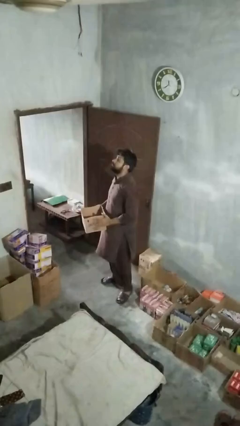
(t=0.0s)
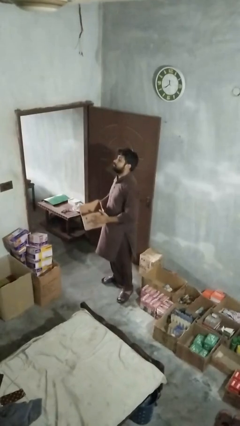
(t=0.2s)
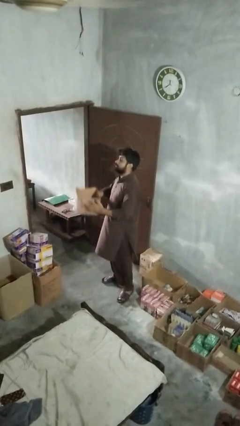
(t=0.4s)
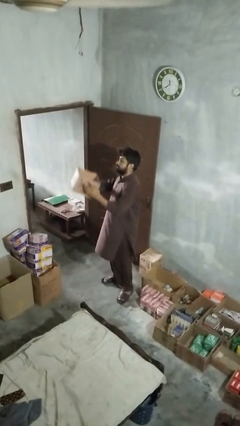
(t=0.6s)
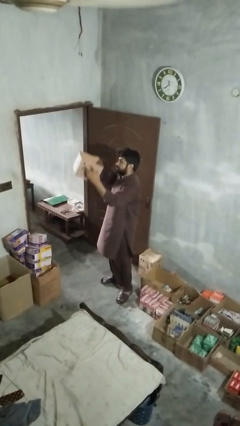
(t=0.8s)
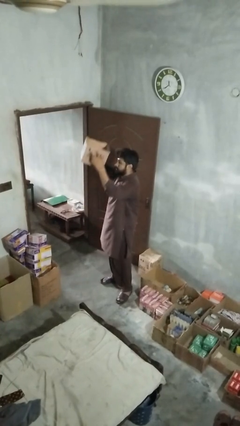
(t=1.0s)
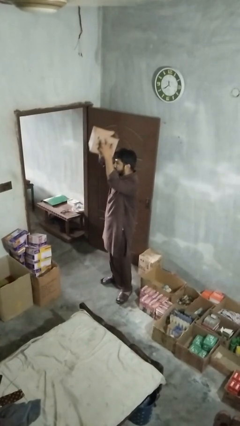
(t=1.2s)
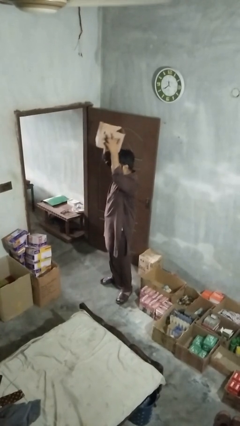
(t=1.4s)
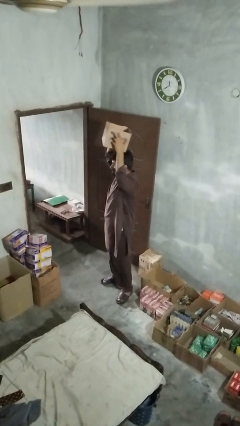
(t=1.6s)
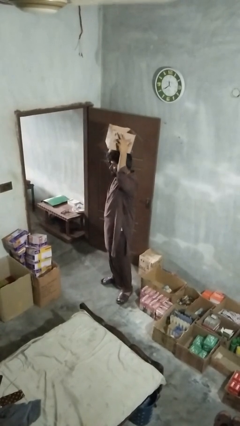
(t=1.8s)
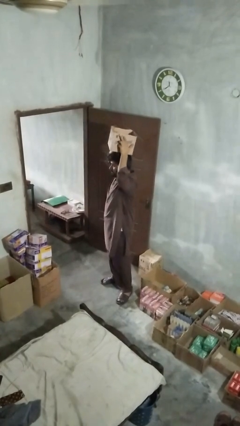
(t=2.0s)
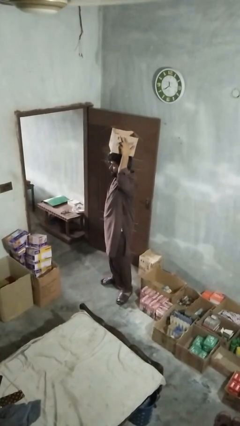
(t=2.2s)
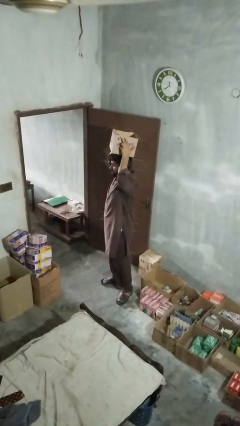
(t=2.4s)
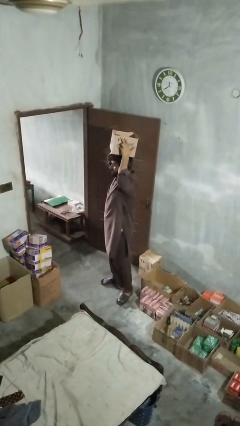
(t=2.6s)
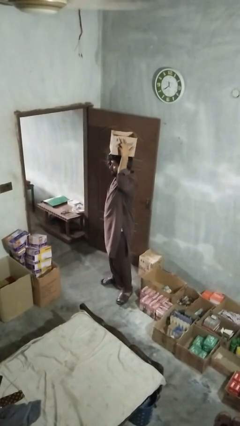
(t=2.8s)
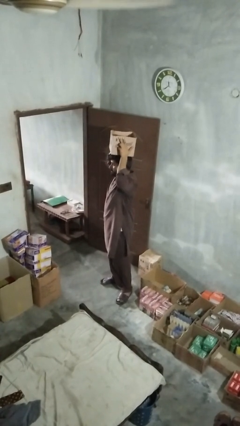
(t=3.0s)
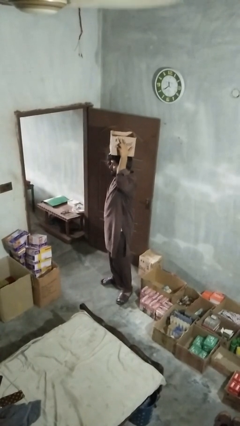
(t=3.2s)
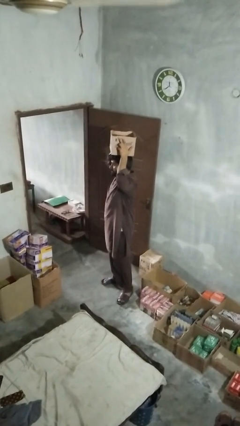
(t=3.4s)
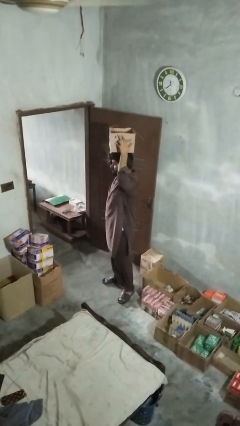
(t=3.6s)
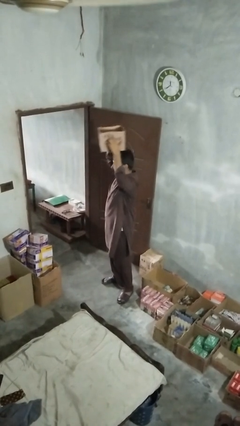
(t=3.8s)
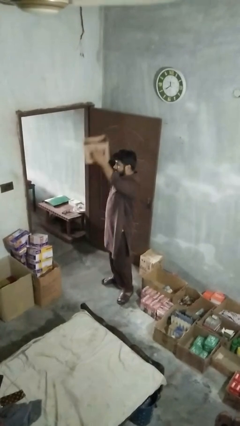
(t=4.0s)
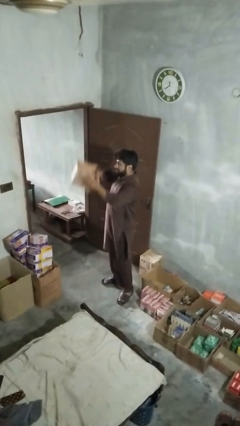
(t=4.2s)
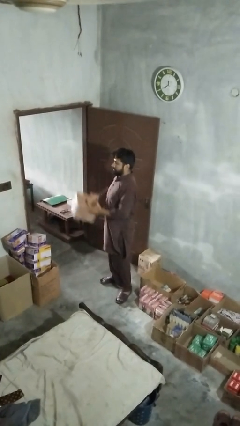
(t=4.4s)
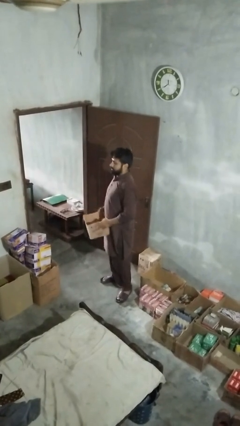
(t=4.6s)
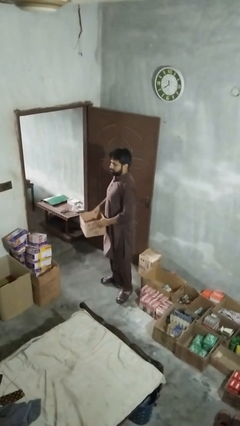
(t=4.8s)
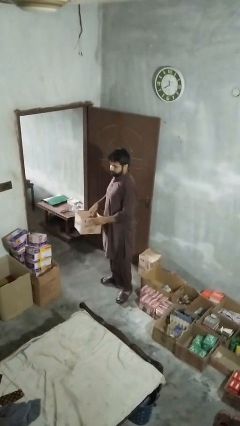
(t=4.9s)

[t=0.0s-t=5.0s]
person holds object above head

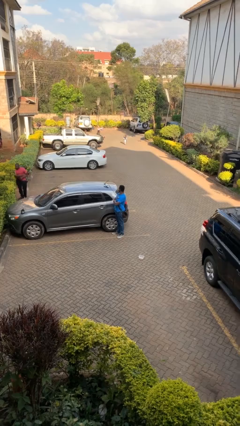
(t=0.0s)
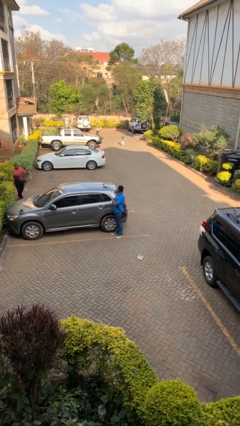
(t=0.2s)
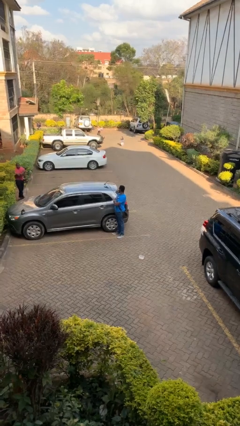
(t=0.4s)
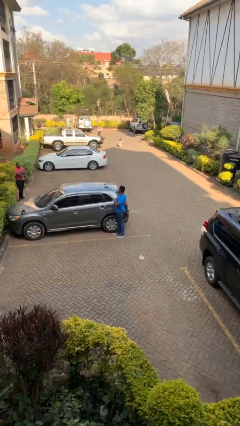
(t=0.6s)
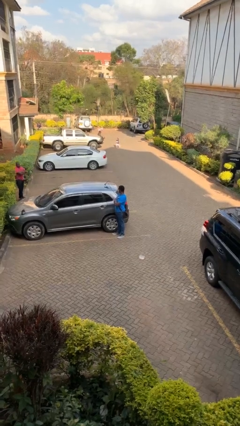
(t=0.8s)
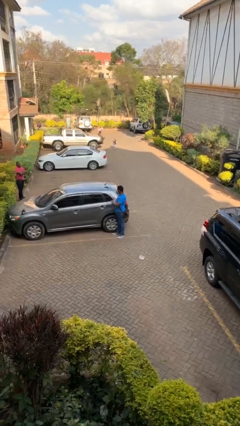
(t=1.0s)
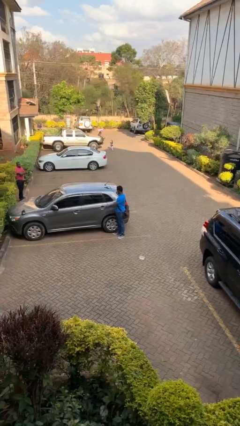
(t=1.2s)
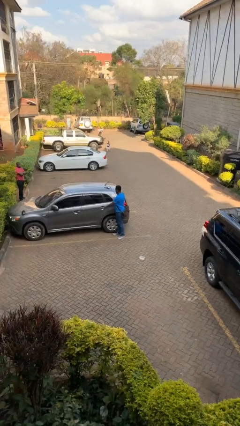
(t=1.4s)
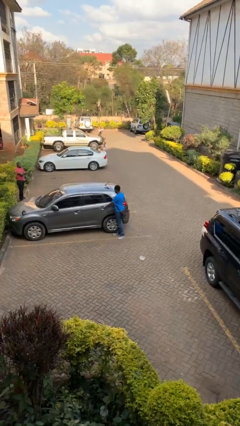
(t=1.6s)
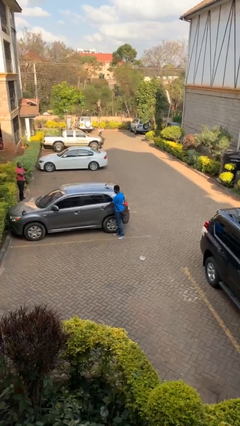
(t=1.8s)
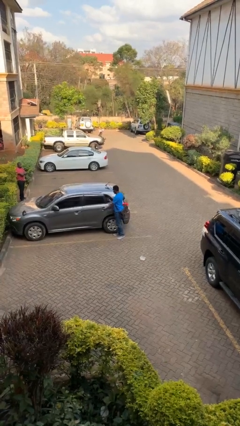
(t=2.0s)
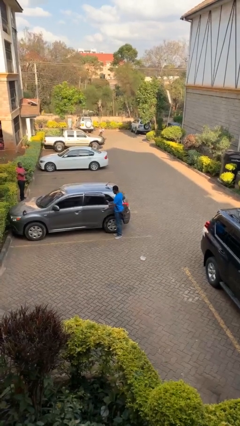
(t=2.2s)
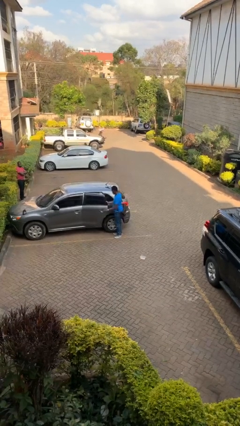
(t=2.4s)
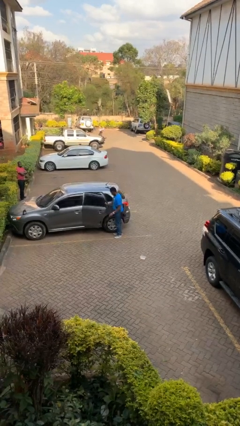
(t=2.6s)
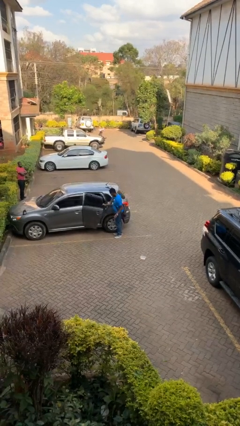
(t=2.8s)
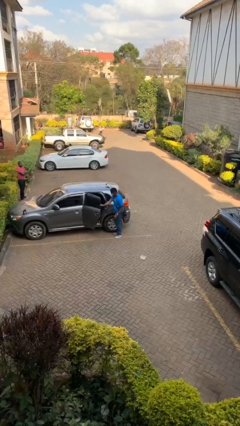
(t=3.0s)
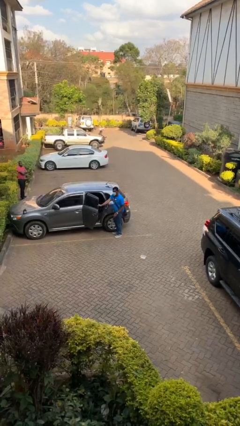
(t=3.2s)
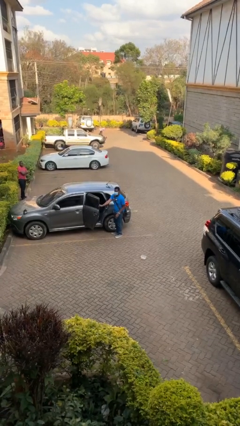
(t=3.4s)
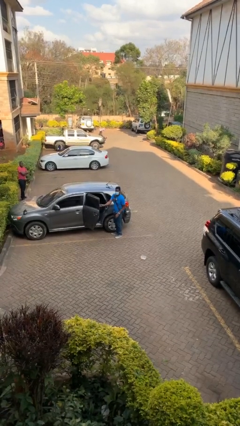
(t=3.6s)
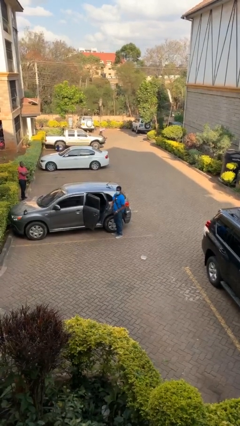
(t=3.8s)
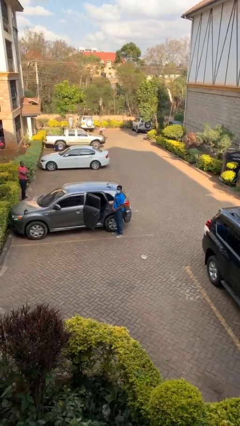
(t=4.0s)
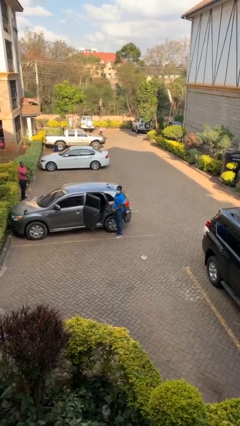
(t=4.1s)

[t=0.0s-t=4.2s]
person opens car door

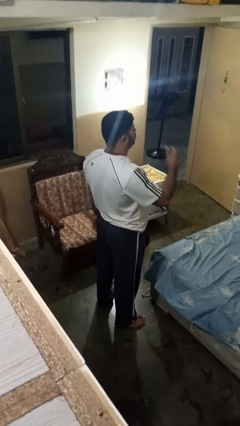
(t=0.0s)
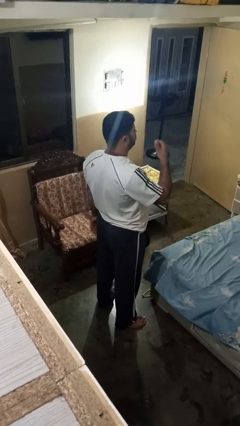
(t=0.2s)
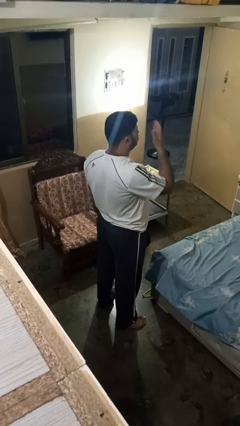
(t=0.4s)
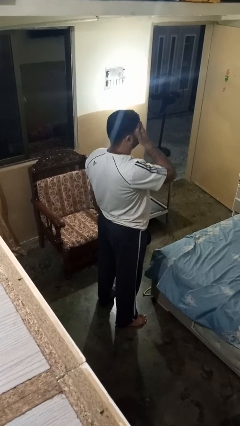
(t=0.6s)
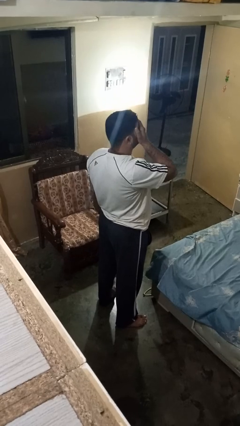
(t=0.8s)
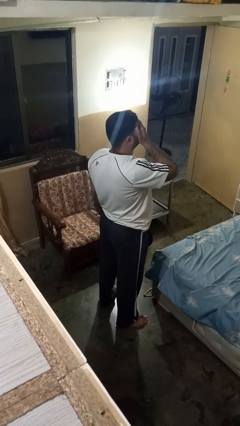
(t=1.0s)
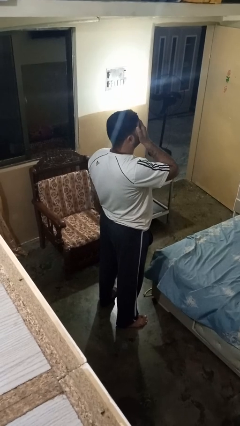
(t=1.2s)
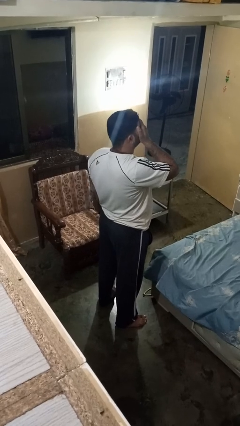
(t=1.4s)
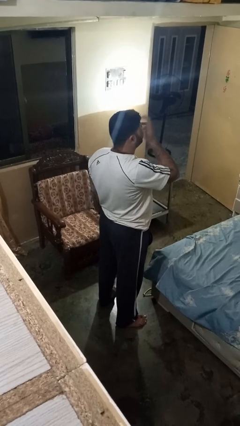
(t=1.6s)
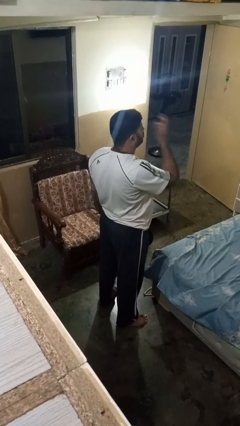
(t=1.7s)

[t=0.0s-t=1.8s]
person covers face with hands

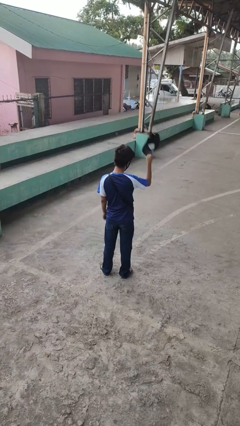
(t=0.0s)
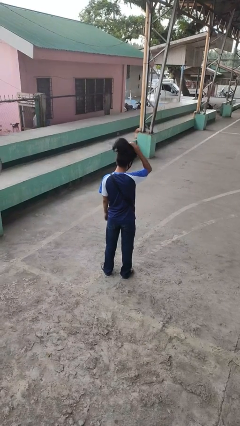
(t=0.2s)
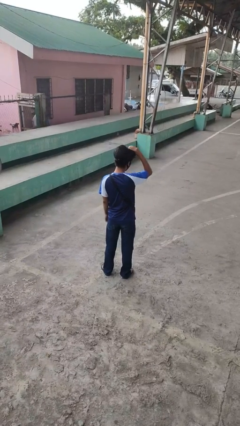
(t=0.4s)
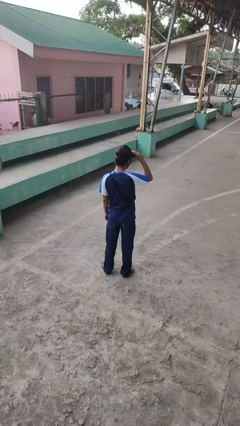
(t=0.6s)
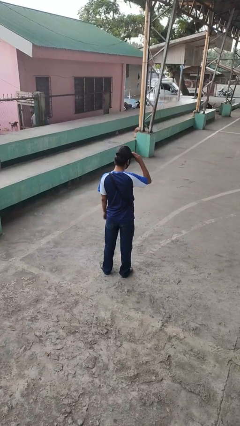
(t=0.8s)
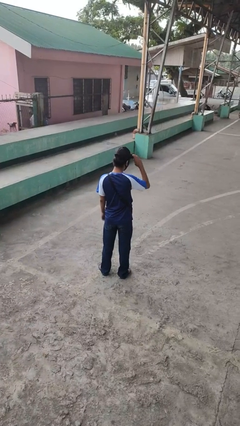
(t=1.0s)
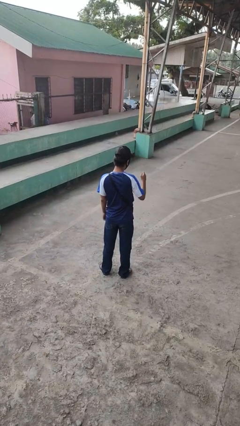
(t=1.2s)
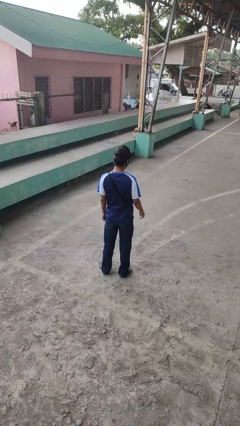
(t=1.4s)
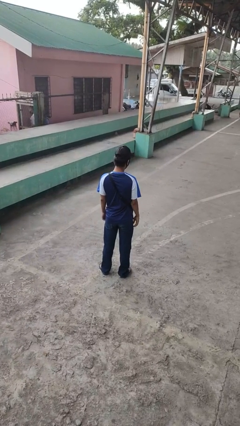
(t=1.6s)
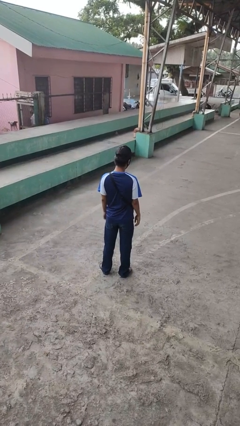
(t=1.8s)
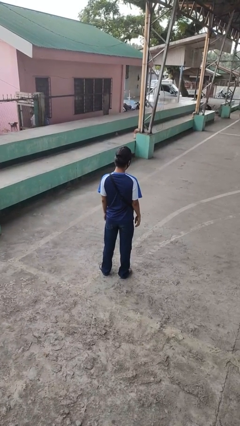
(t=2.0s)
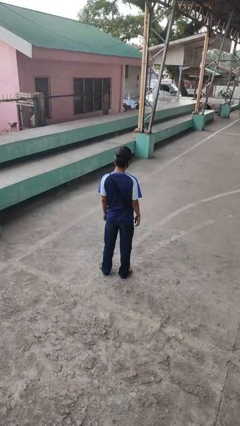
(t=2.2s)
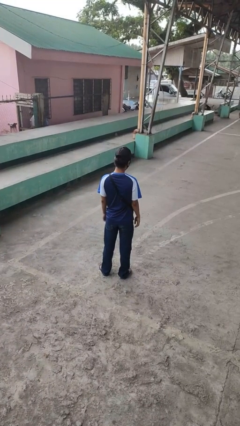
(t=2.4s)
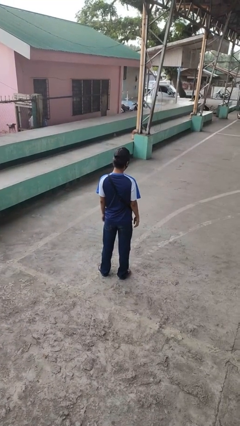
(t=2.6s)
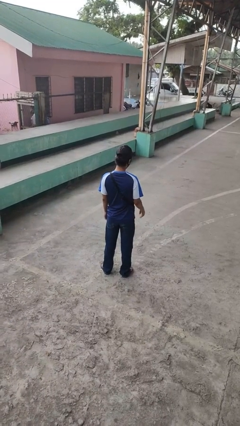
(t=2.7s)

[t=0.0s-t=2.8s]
person puts on hat

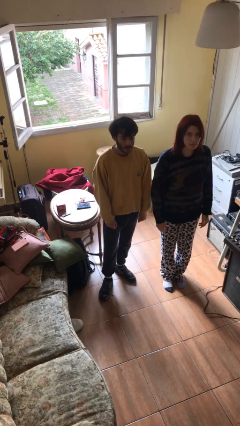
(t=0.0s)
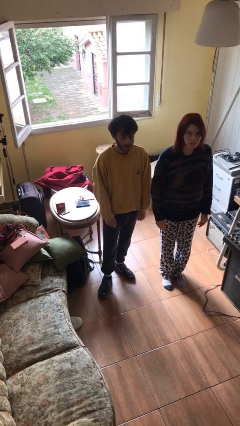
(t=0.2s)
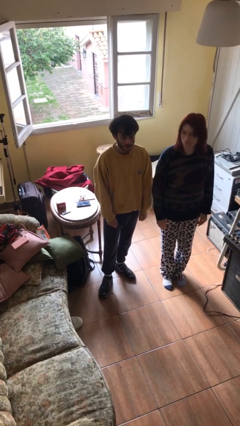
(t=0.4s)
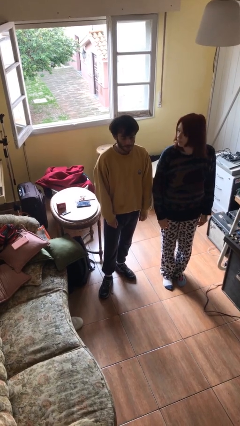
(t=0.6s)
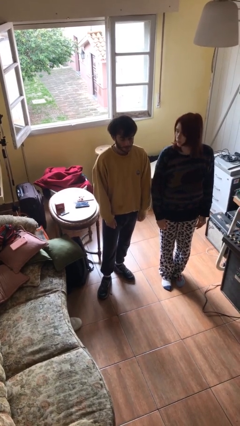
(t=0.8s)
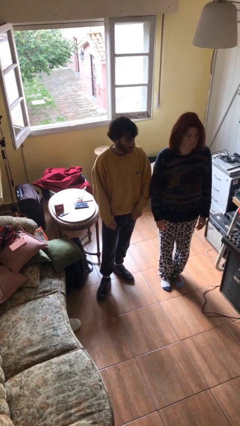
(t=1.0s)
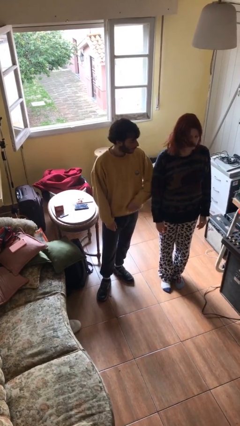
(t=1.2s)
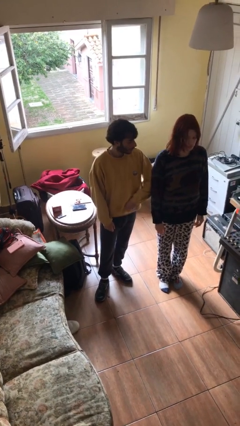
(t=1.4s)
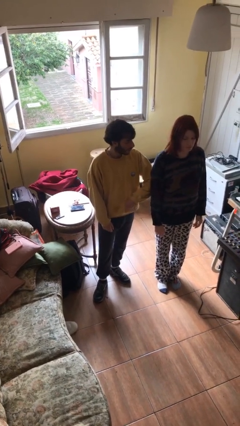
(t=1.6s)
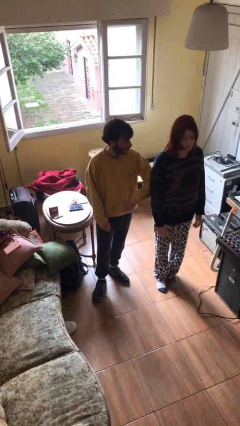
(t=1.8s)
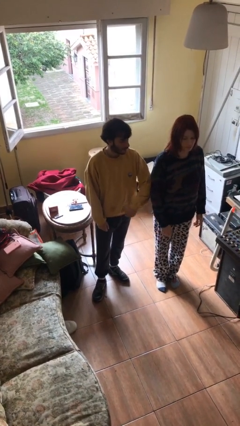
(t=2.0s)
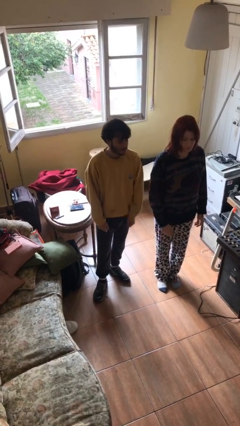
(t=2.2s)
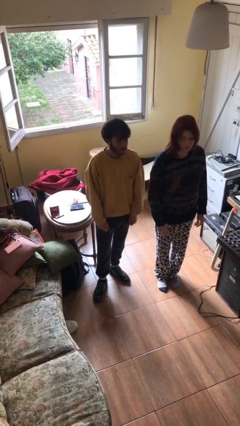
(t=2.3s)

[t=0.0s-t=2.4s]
person nudges person with elbow

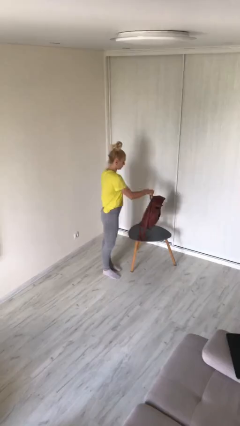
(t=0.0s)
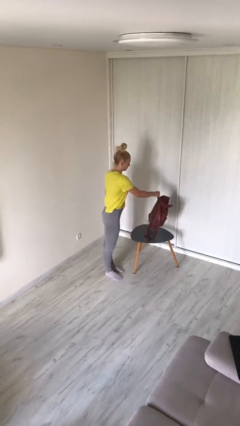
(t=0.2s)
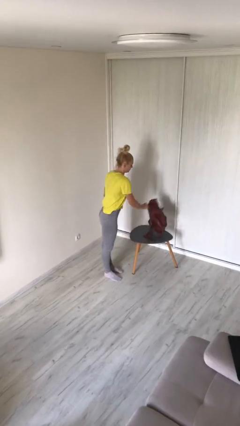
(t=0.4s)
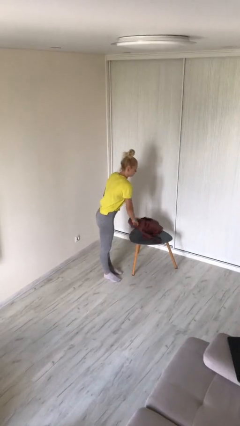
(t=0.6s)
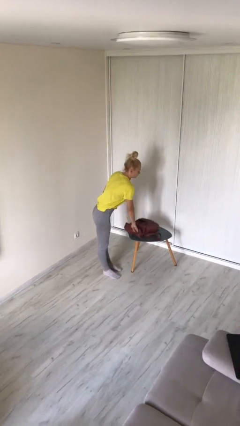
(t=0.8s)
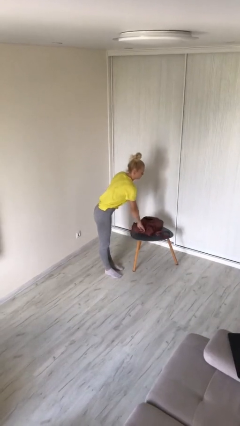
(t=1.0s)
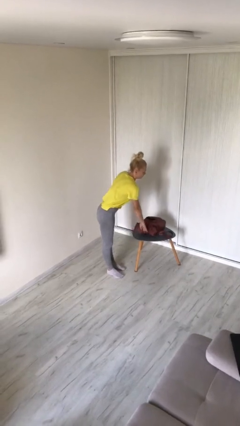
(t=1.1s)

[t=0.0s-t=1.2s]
person puts down object on table
